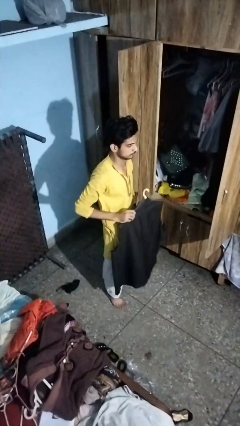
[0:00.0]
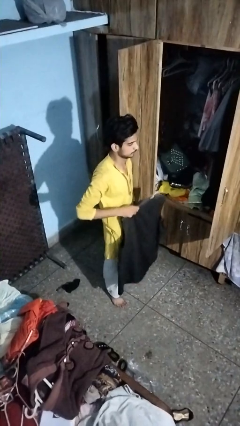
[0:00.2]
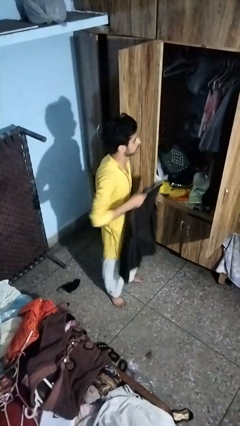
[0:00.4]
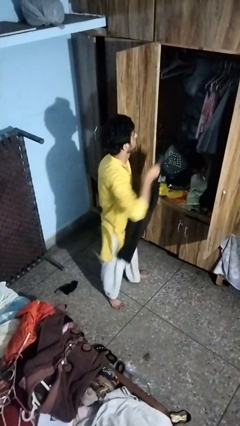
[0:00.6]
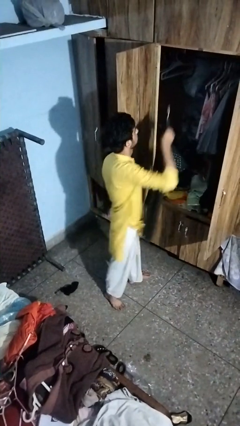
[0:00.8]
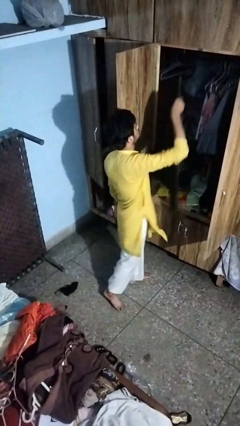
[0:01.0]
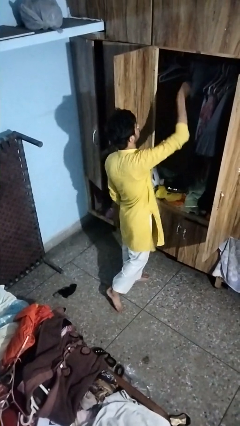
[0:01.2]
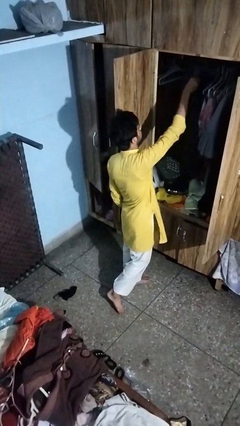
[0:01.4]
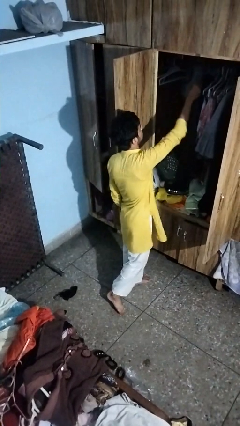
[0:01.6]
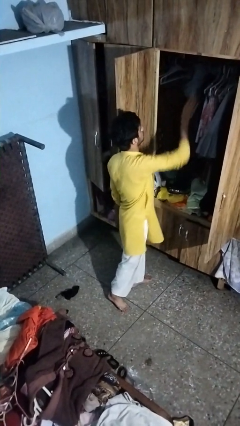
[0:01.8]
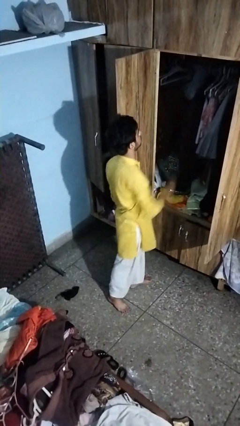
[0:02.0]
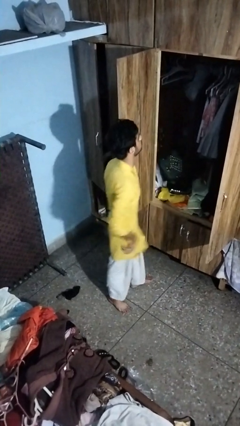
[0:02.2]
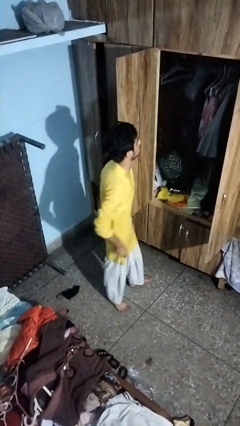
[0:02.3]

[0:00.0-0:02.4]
person puts clothes into closet

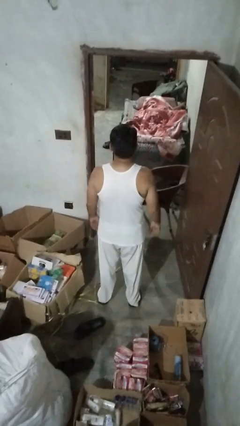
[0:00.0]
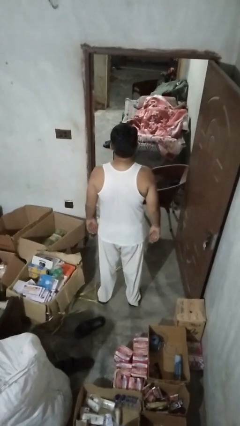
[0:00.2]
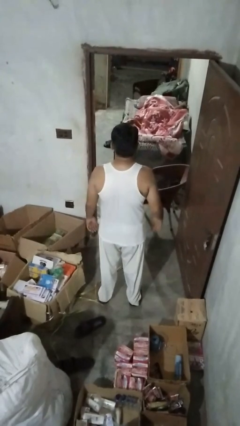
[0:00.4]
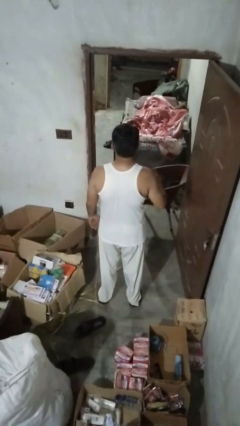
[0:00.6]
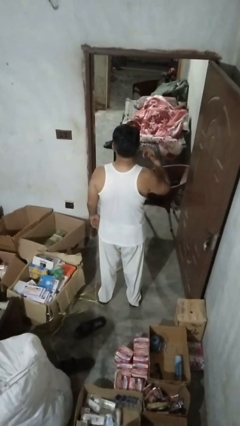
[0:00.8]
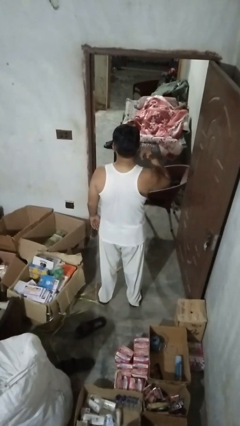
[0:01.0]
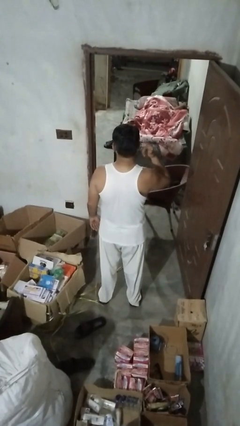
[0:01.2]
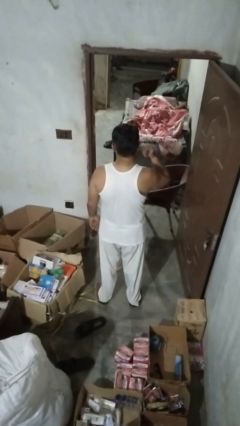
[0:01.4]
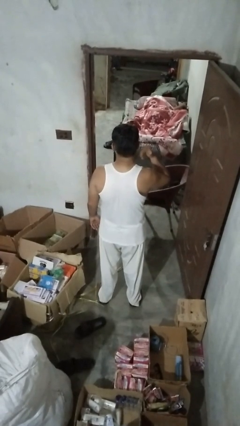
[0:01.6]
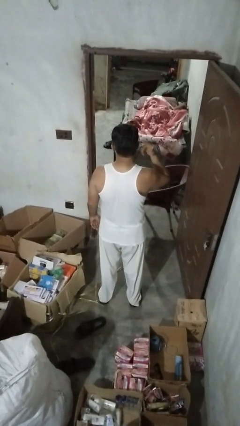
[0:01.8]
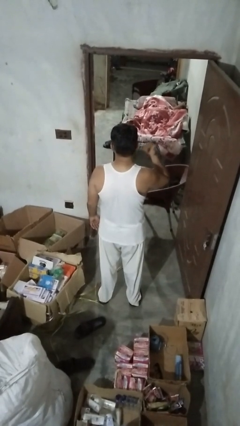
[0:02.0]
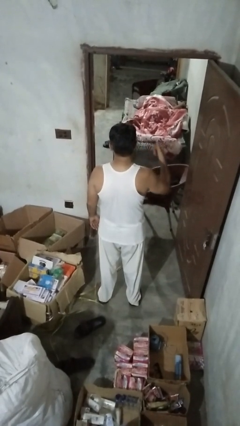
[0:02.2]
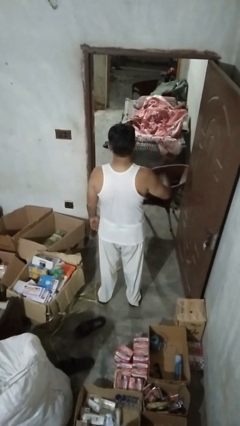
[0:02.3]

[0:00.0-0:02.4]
person touches earlobe

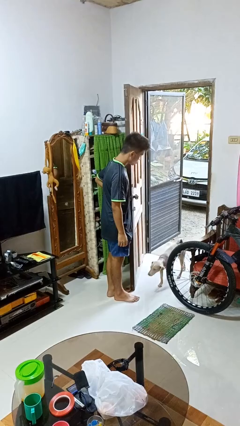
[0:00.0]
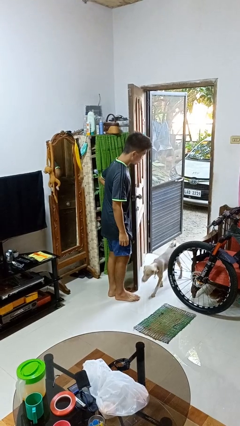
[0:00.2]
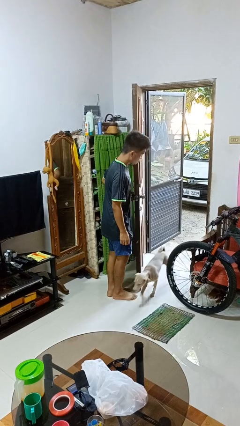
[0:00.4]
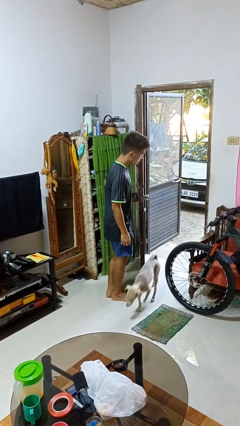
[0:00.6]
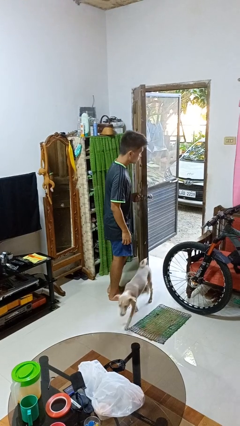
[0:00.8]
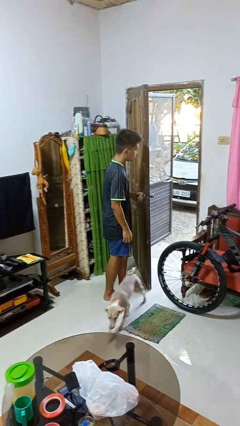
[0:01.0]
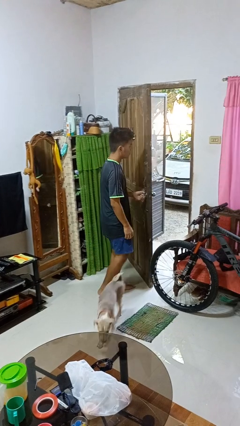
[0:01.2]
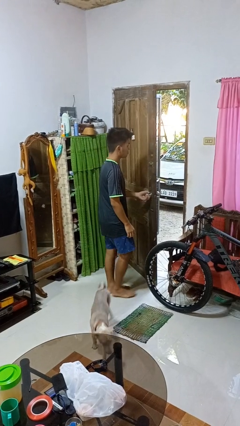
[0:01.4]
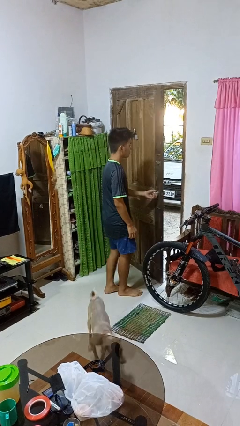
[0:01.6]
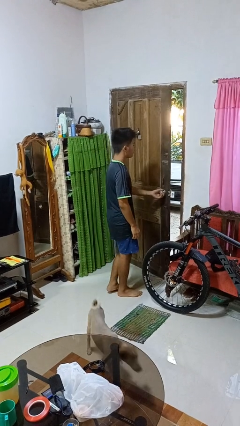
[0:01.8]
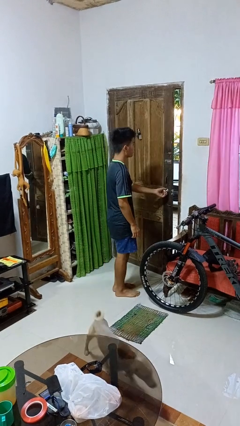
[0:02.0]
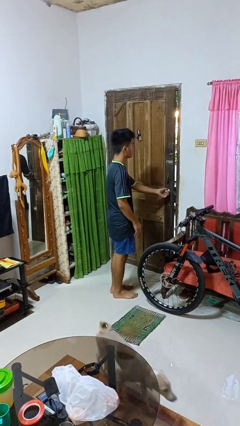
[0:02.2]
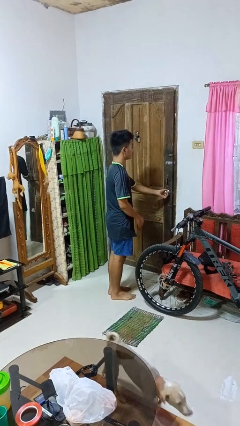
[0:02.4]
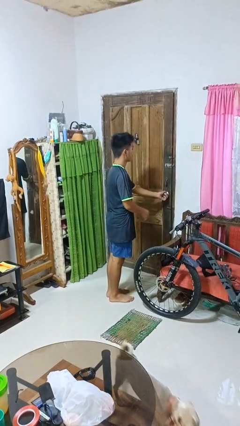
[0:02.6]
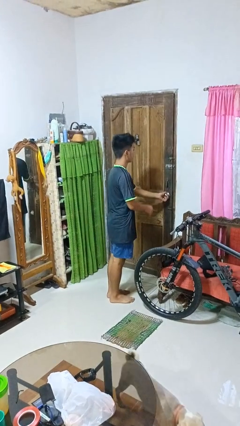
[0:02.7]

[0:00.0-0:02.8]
person closes facility door

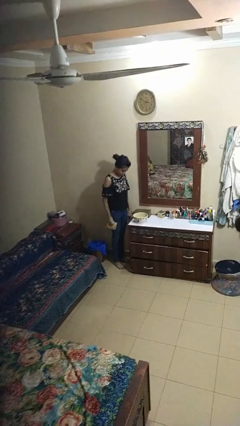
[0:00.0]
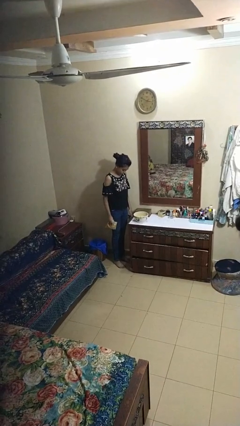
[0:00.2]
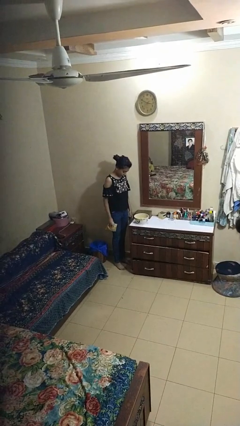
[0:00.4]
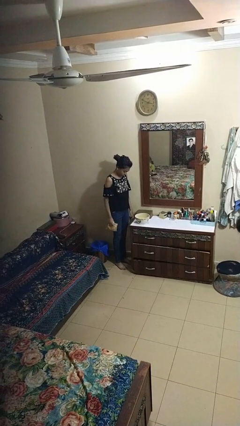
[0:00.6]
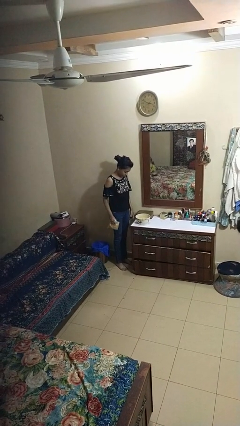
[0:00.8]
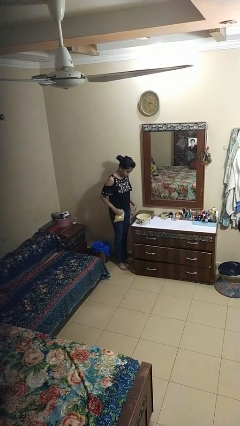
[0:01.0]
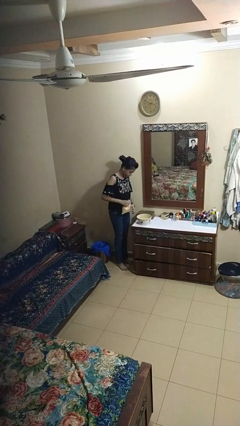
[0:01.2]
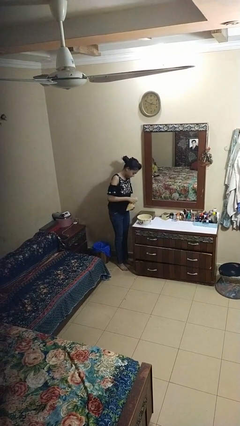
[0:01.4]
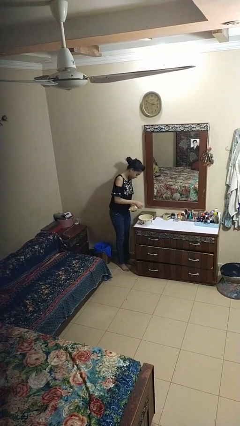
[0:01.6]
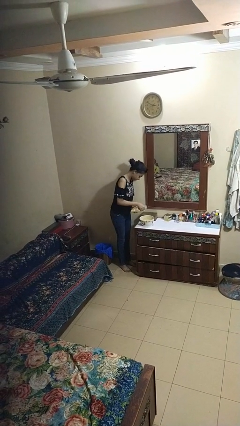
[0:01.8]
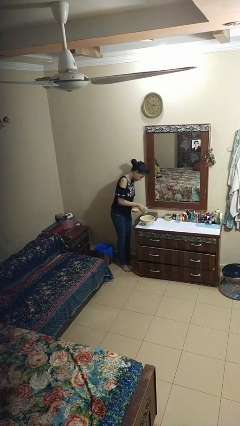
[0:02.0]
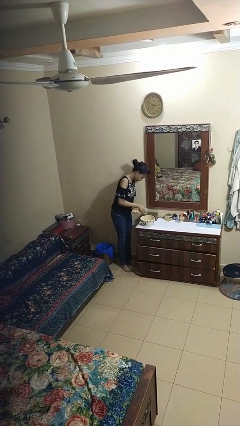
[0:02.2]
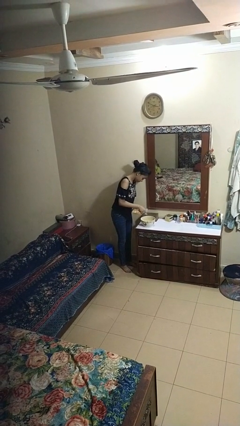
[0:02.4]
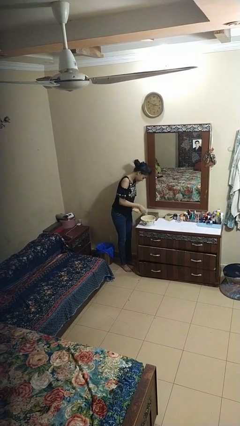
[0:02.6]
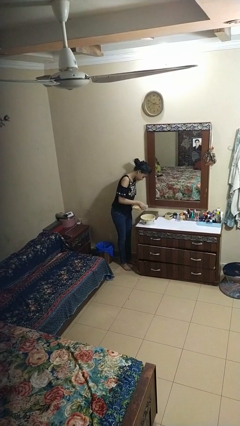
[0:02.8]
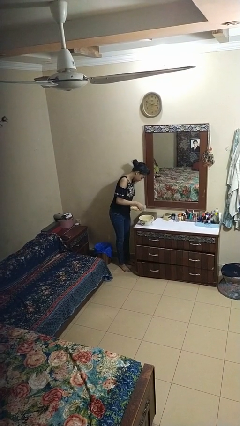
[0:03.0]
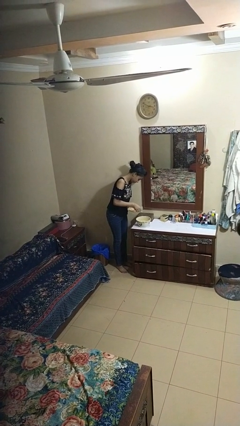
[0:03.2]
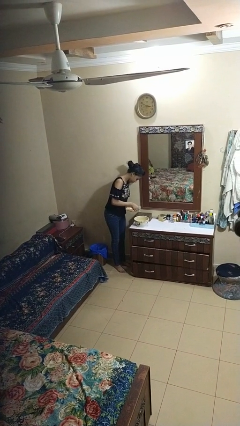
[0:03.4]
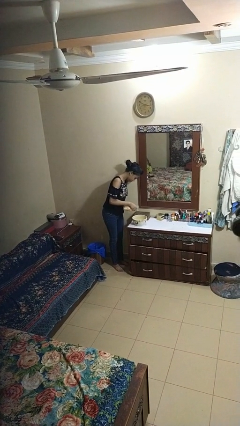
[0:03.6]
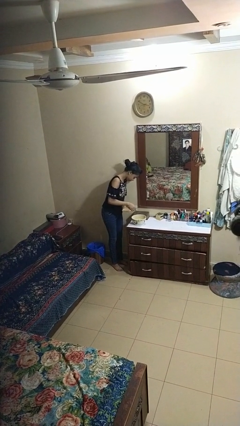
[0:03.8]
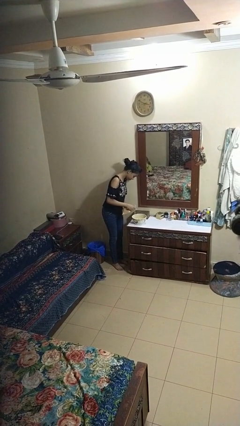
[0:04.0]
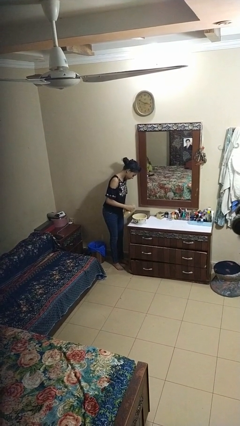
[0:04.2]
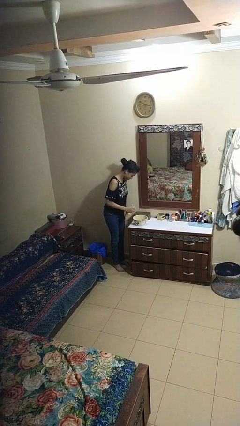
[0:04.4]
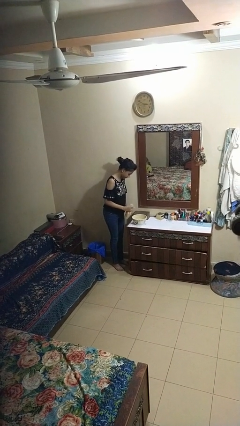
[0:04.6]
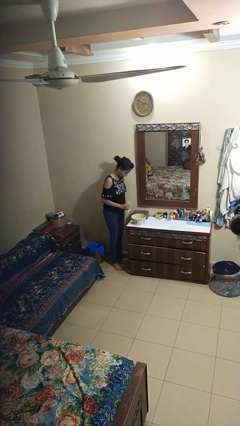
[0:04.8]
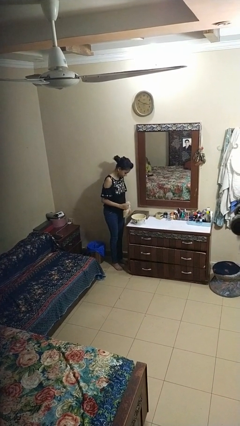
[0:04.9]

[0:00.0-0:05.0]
person pours into bowl

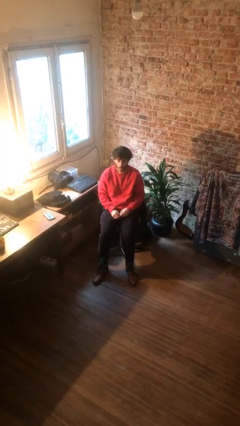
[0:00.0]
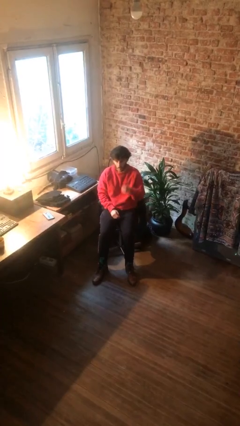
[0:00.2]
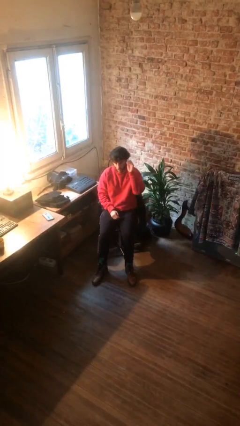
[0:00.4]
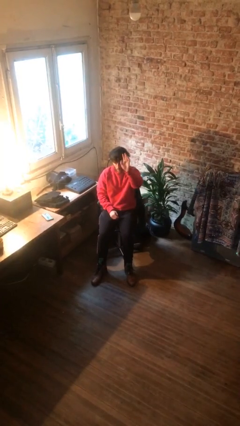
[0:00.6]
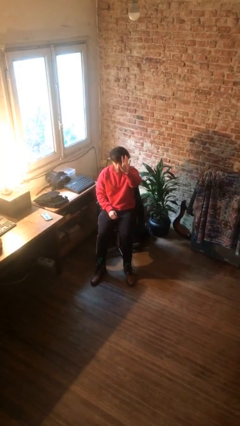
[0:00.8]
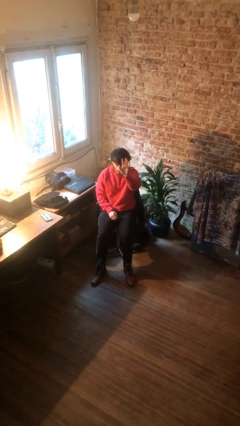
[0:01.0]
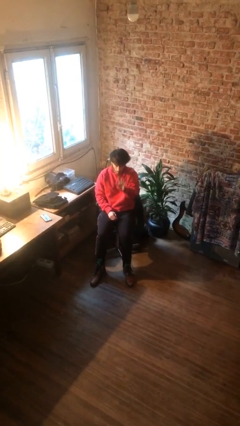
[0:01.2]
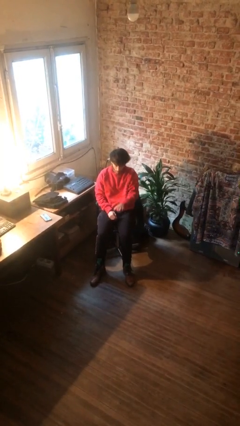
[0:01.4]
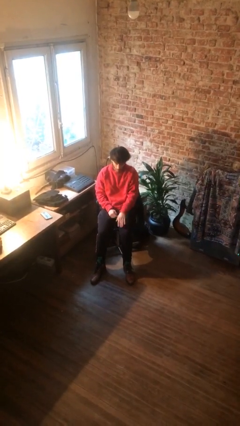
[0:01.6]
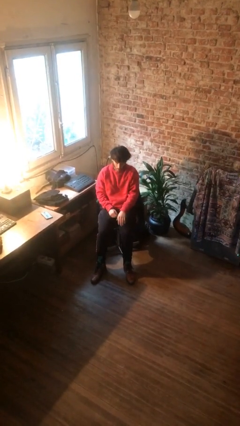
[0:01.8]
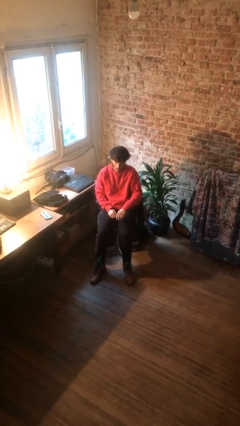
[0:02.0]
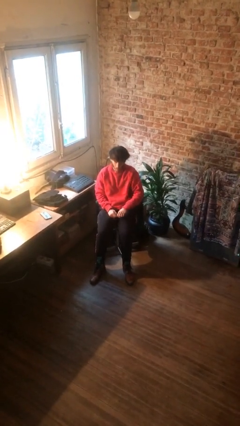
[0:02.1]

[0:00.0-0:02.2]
person gestures swipe down

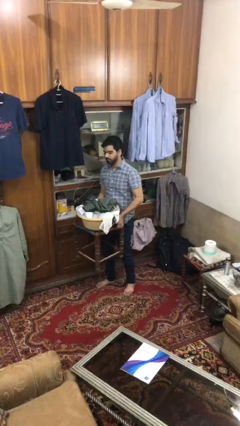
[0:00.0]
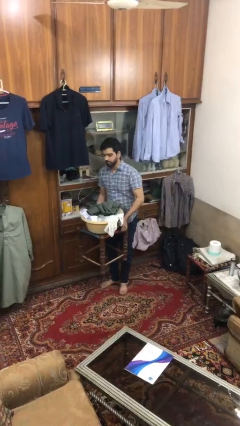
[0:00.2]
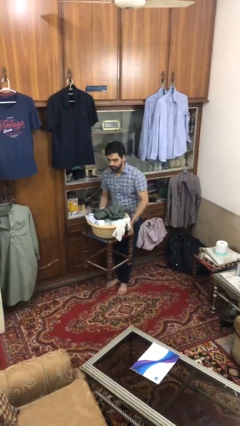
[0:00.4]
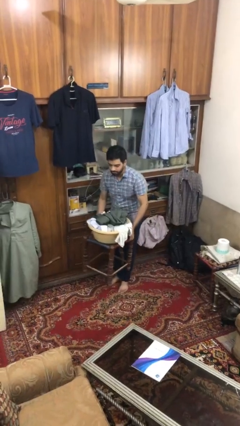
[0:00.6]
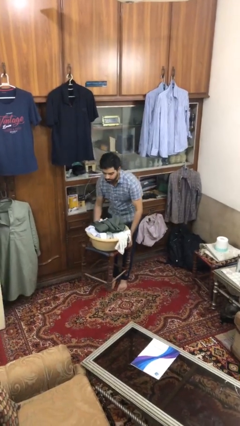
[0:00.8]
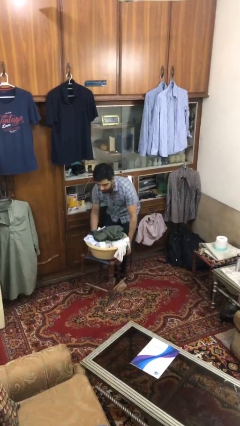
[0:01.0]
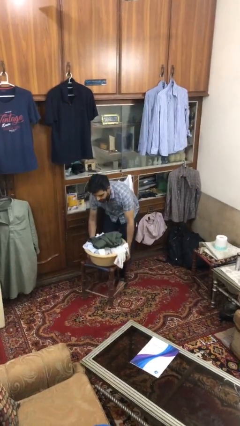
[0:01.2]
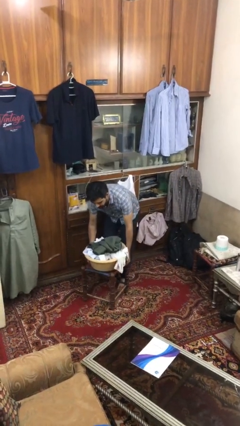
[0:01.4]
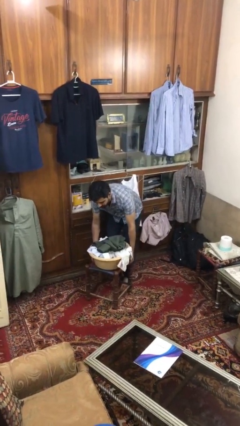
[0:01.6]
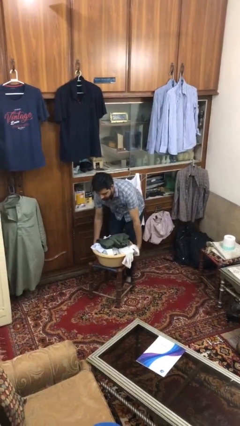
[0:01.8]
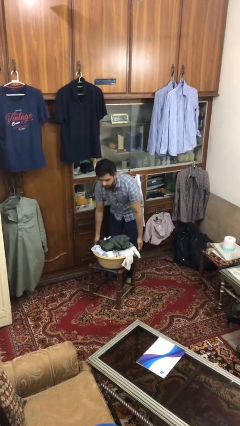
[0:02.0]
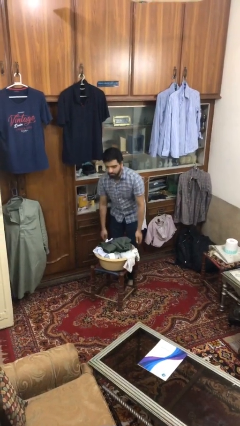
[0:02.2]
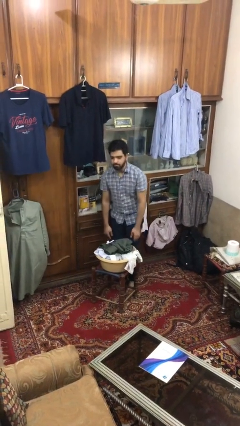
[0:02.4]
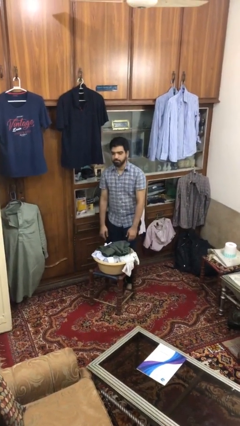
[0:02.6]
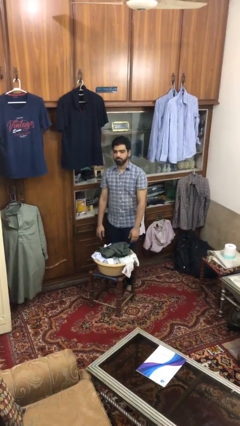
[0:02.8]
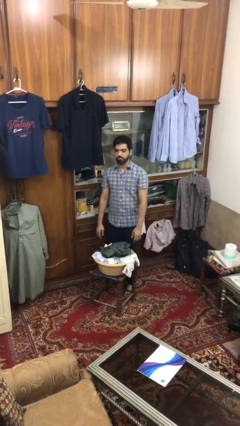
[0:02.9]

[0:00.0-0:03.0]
person puts down object on floor
